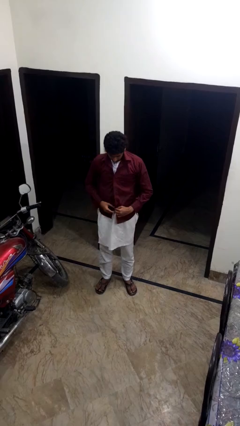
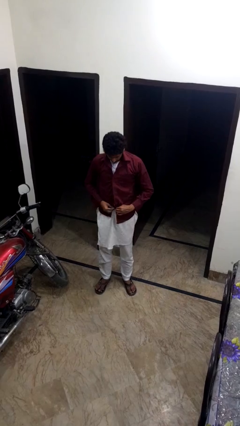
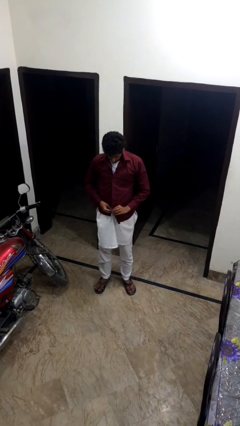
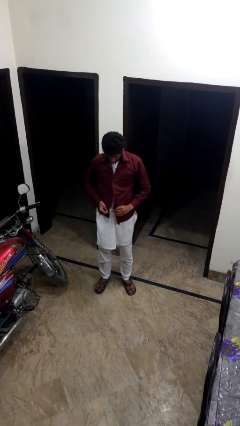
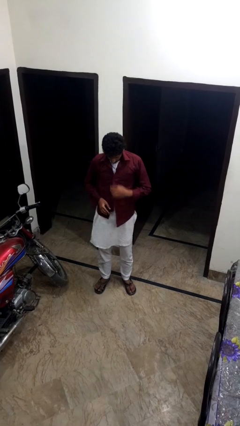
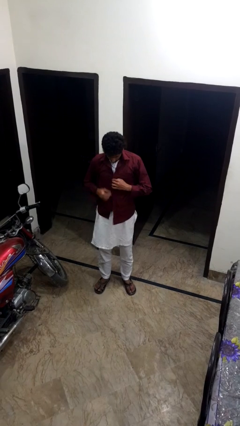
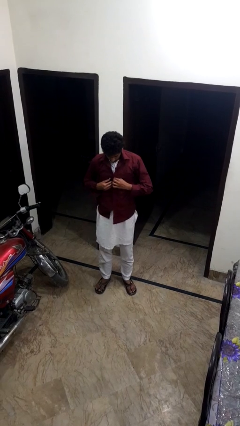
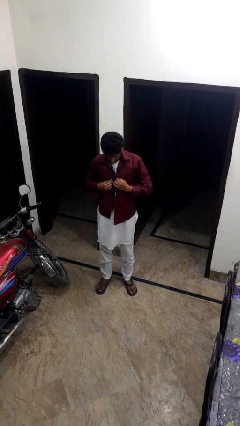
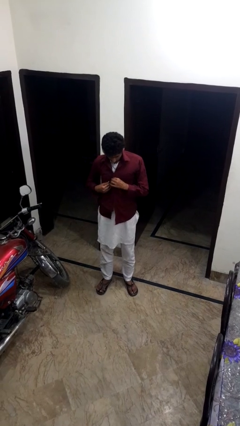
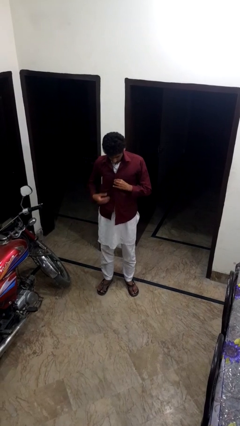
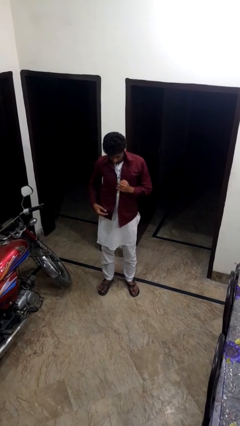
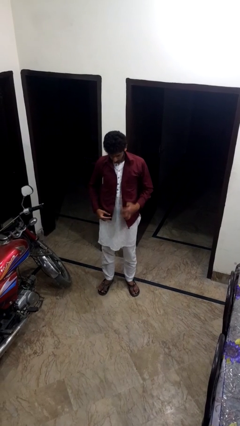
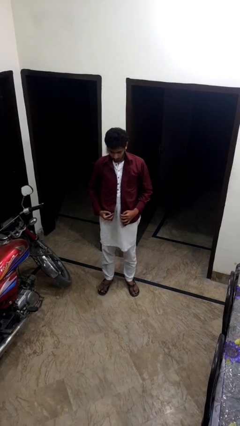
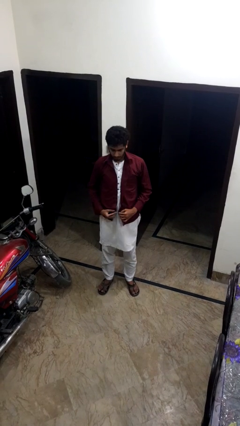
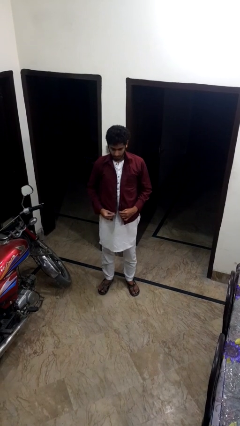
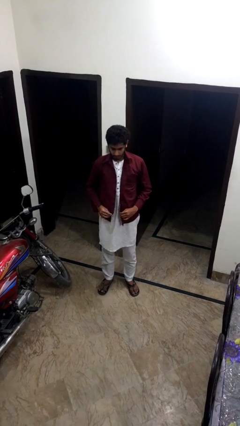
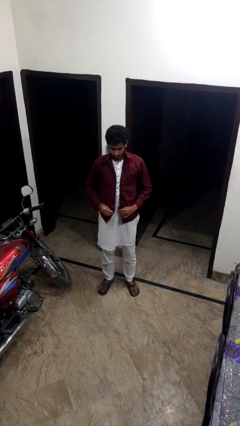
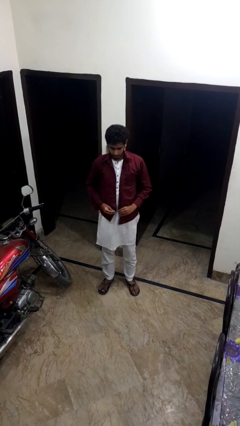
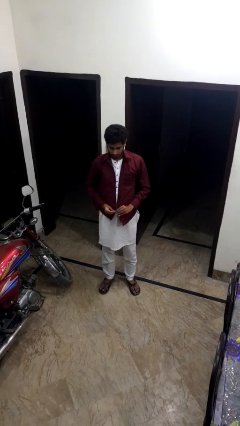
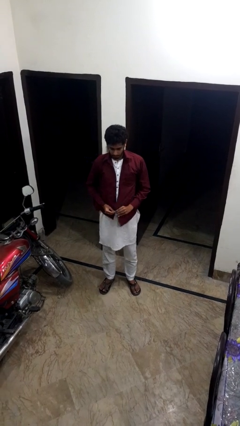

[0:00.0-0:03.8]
person unbuttons shirt

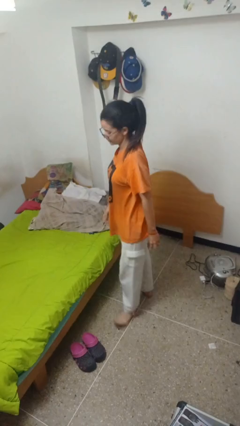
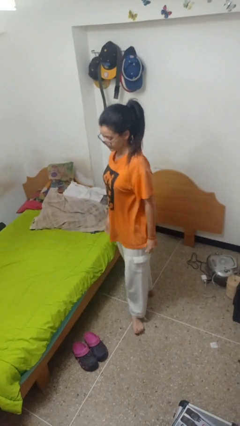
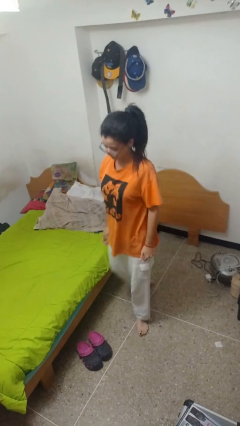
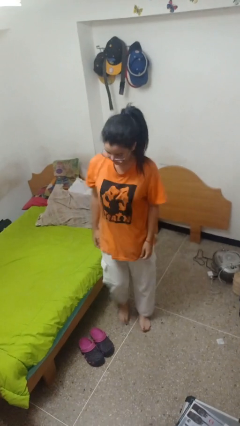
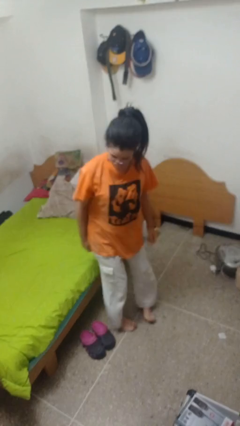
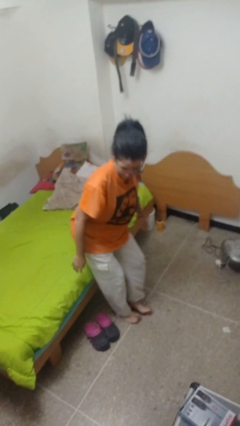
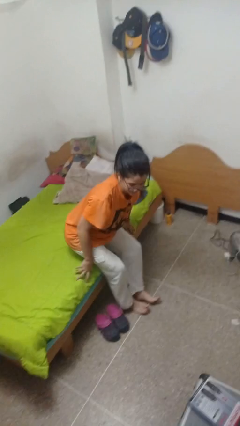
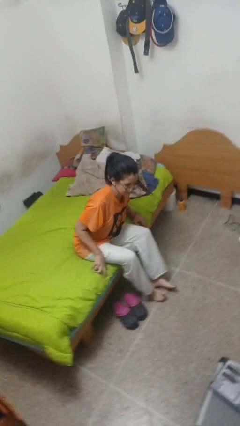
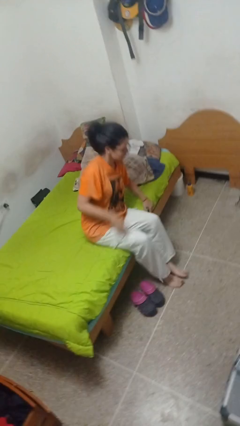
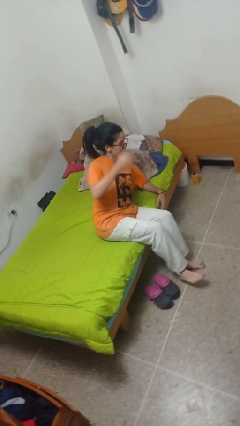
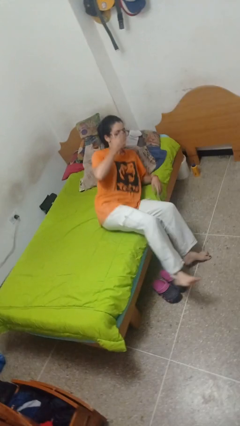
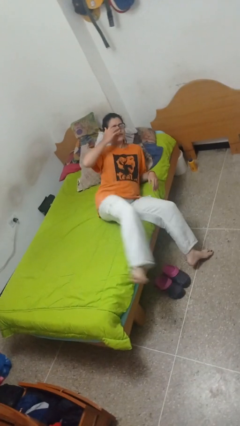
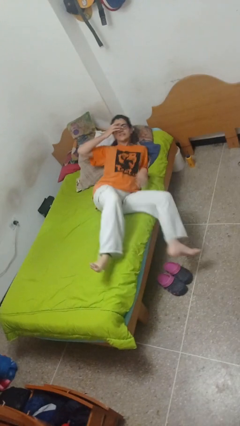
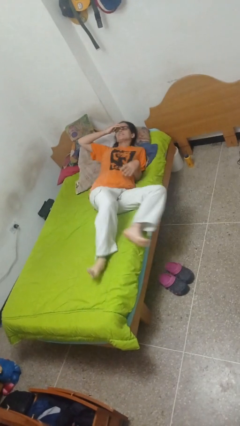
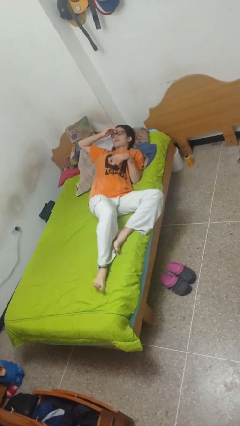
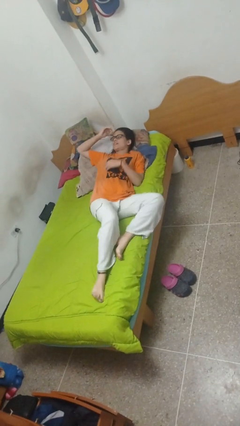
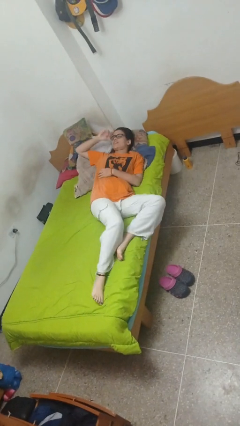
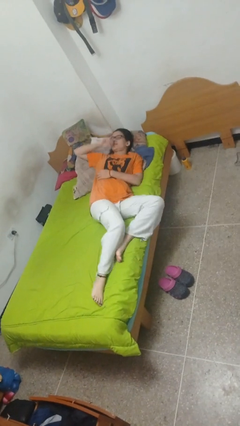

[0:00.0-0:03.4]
person lies down on bed

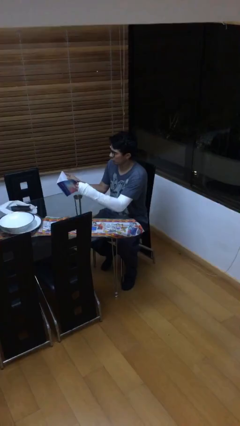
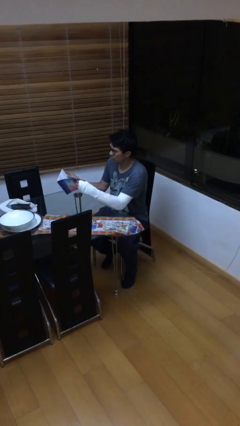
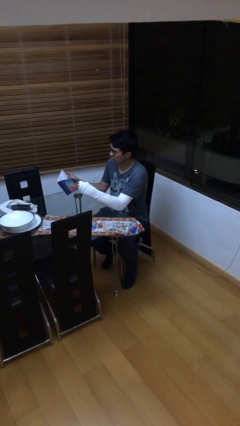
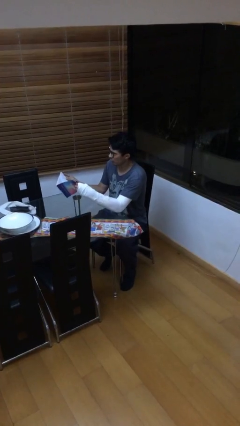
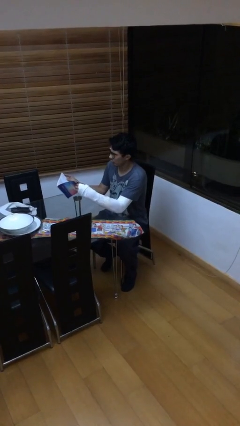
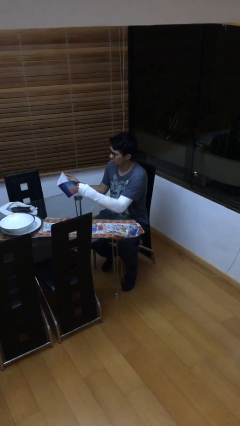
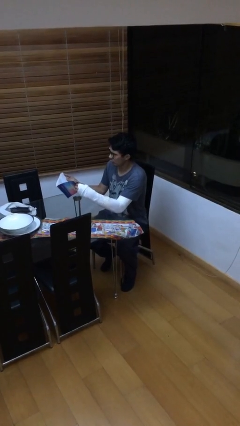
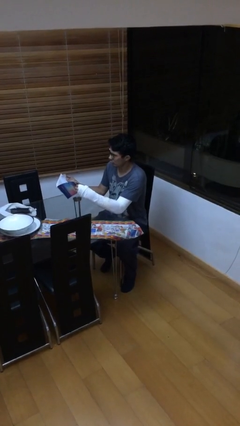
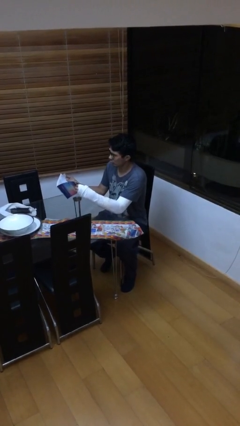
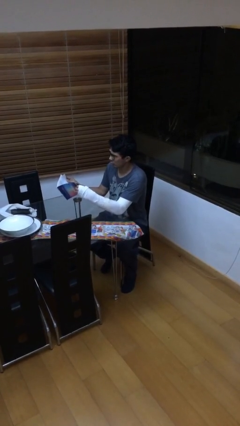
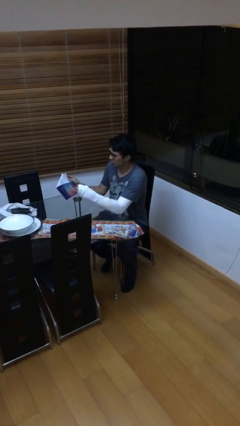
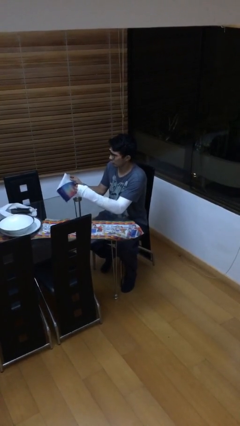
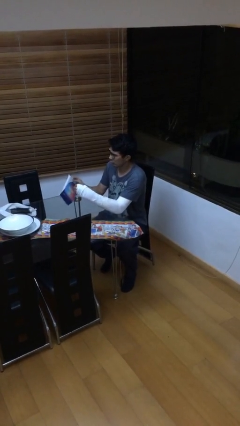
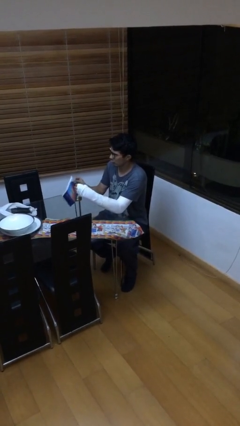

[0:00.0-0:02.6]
person reads document

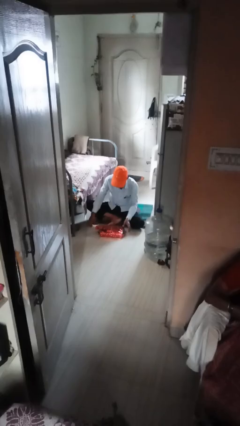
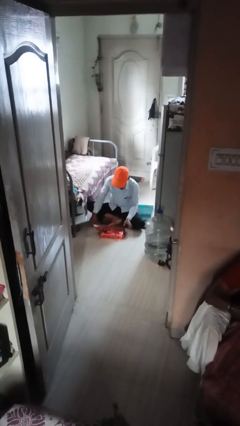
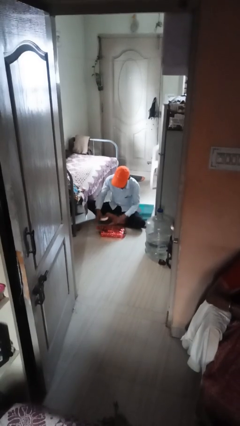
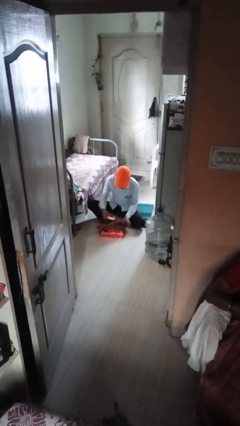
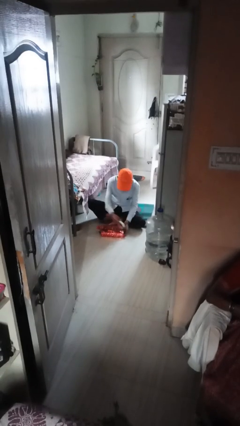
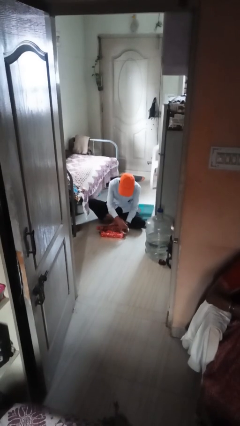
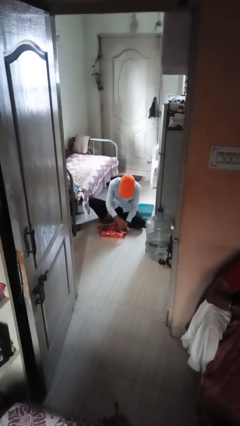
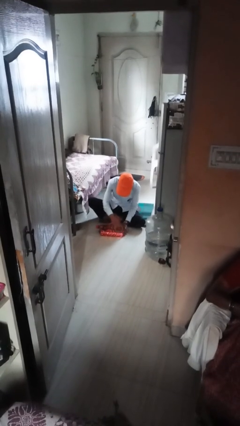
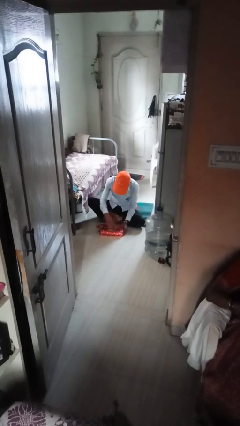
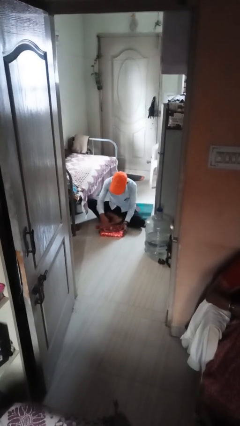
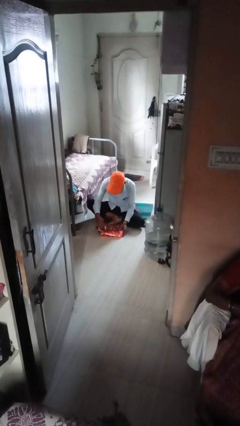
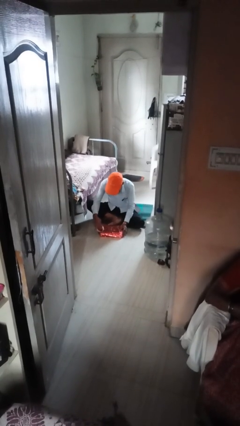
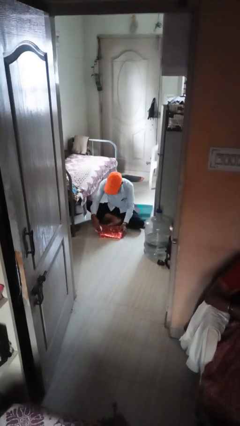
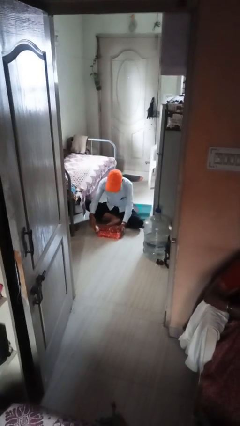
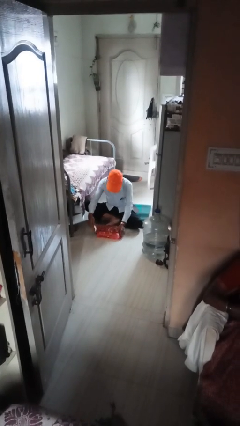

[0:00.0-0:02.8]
person wraps box

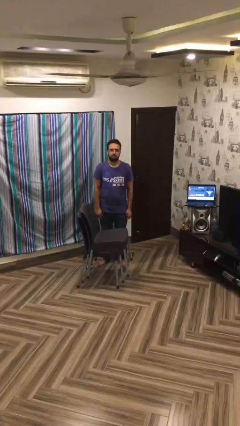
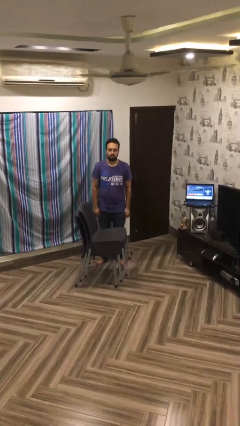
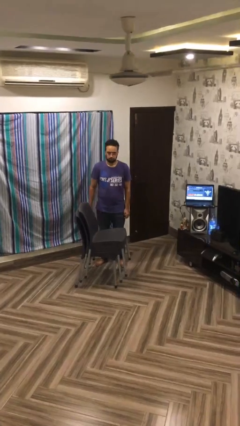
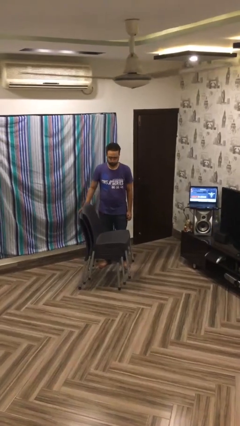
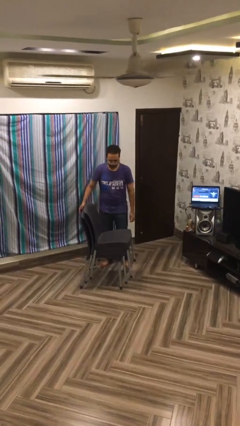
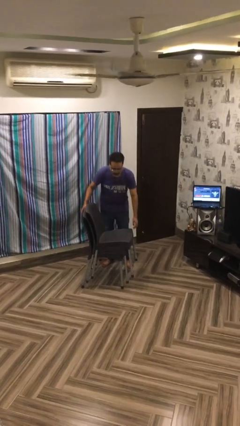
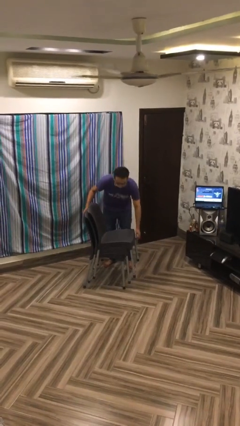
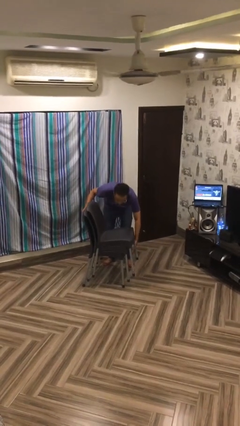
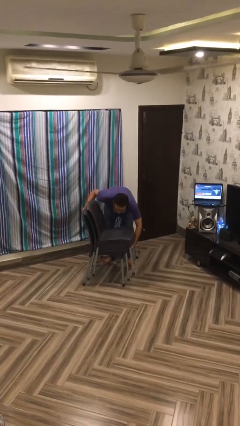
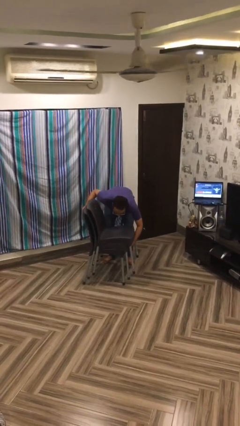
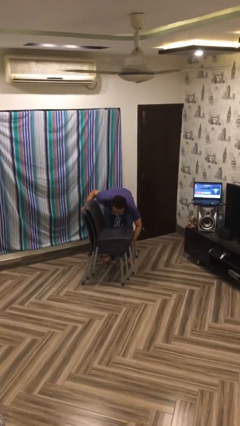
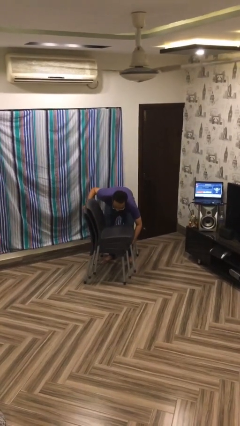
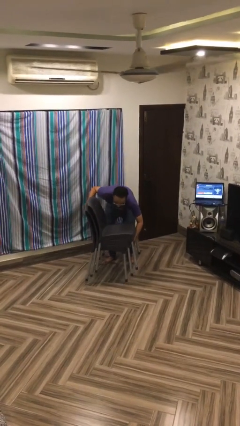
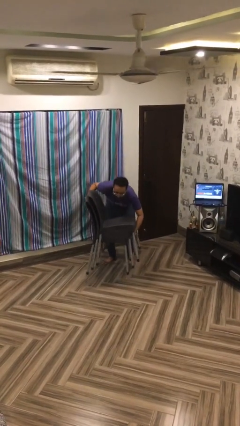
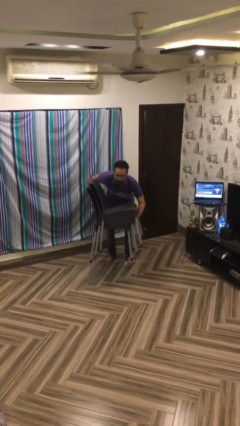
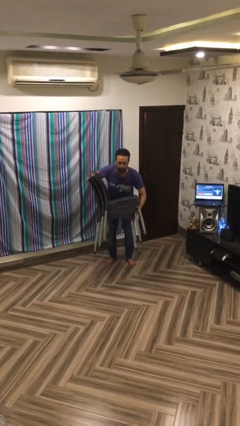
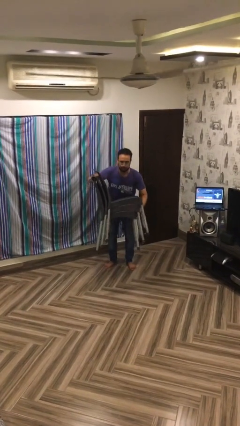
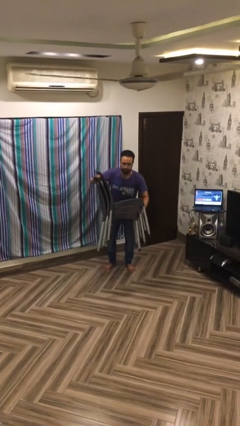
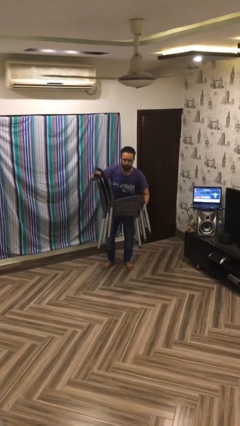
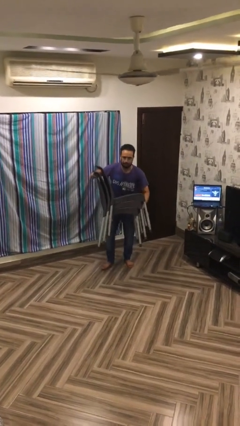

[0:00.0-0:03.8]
person picks up object from floor

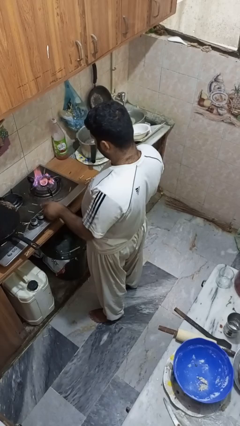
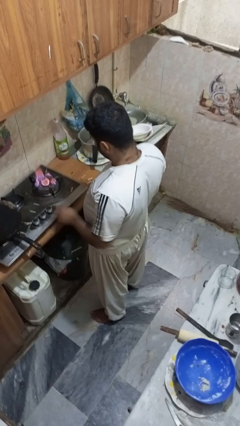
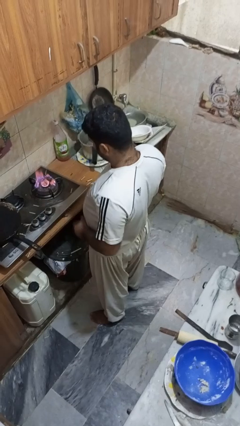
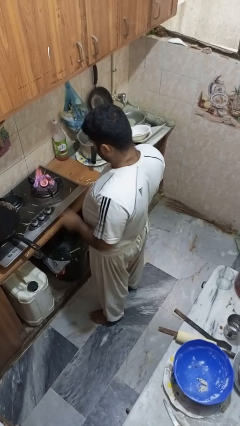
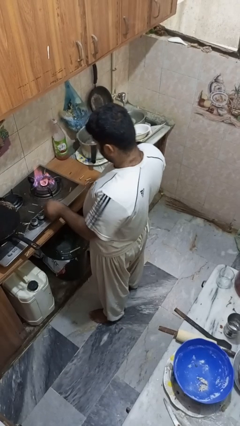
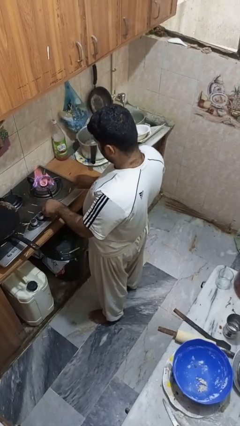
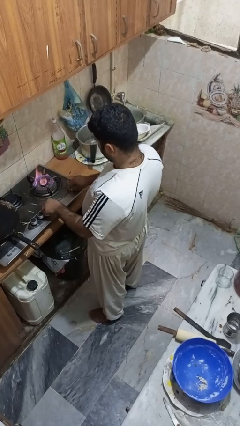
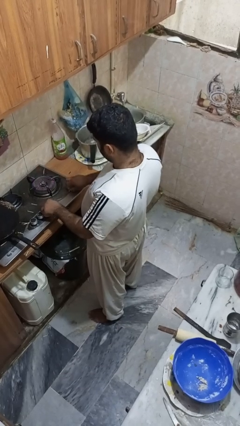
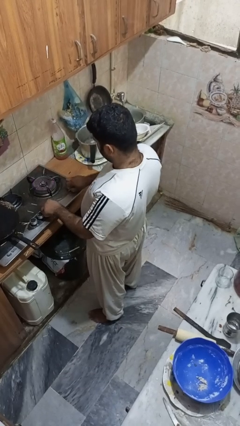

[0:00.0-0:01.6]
person turns off stovetop
